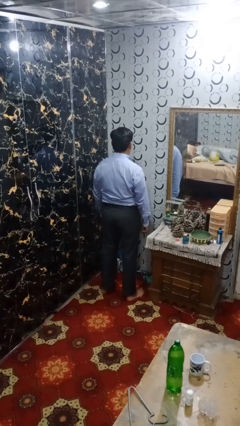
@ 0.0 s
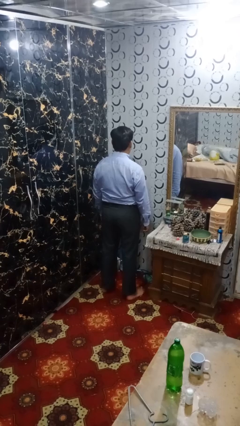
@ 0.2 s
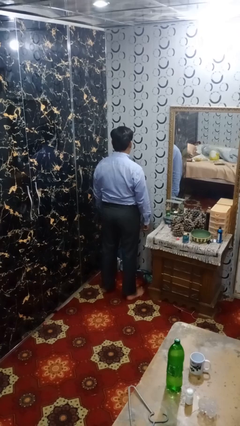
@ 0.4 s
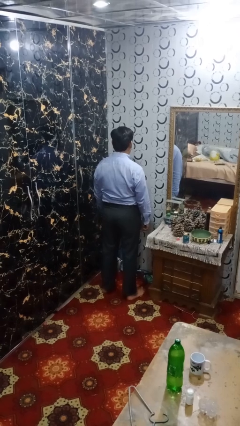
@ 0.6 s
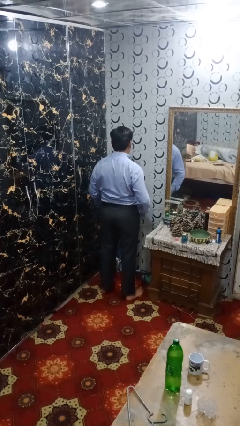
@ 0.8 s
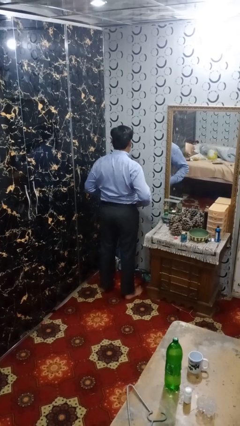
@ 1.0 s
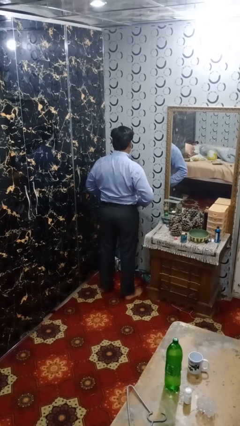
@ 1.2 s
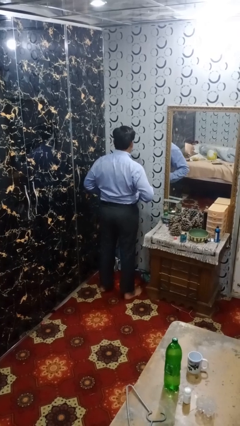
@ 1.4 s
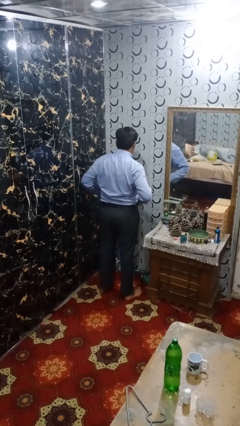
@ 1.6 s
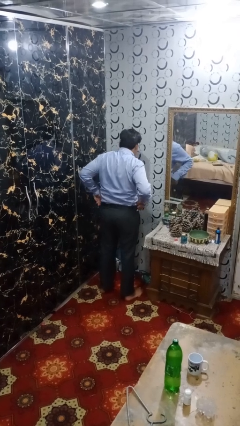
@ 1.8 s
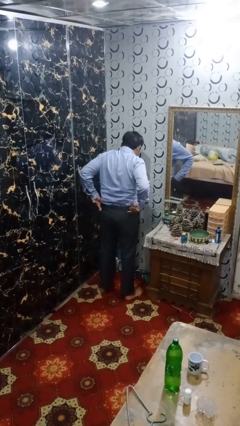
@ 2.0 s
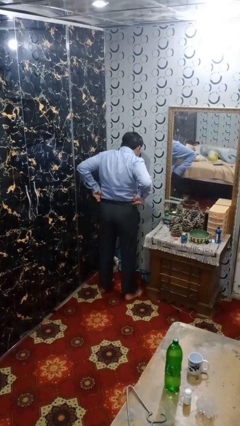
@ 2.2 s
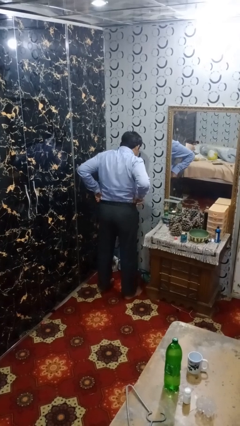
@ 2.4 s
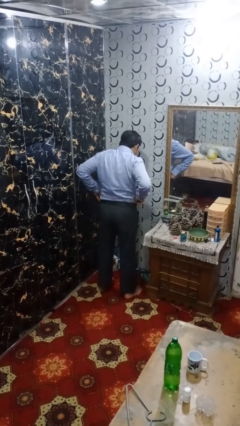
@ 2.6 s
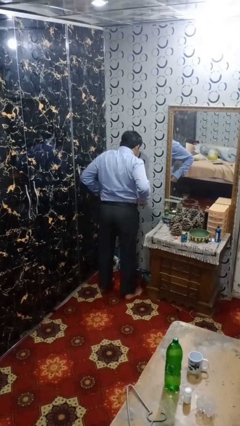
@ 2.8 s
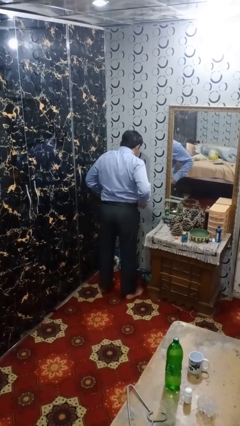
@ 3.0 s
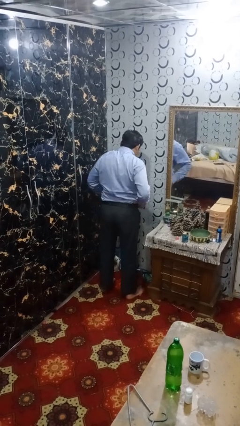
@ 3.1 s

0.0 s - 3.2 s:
person hikes up pants

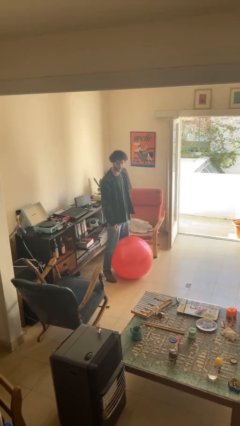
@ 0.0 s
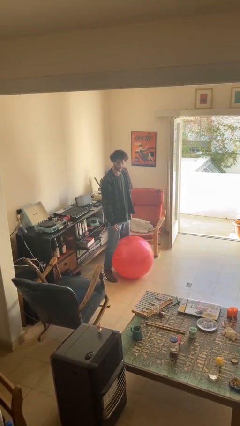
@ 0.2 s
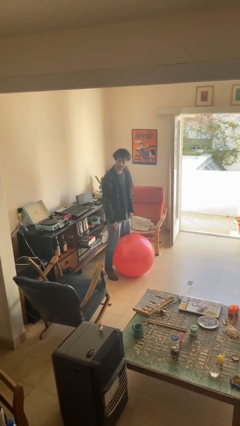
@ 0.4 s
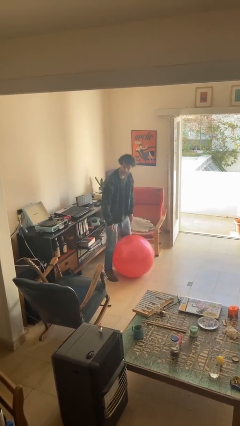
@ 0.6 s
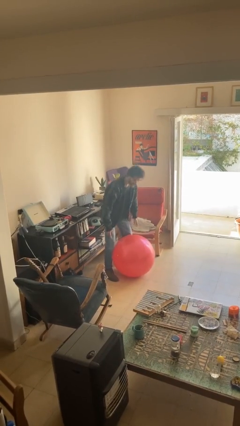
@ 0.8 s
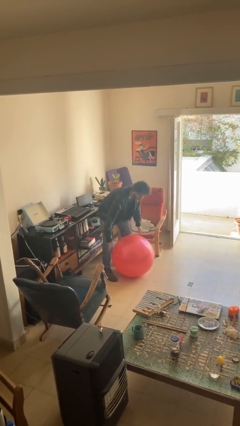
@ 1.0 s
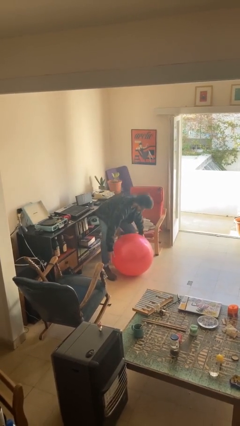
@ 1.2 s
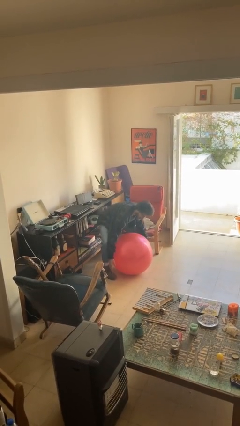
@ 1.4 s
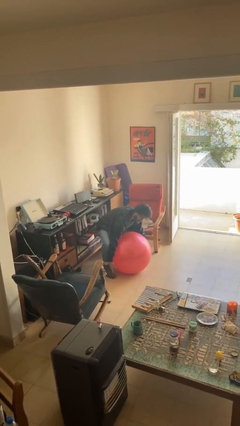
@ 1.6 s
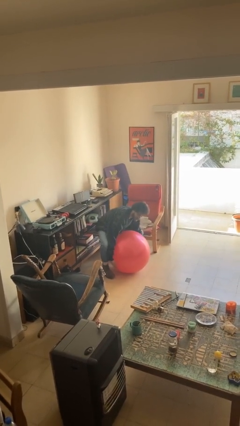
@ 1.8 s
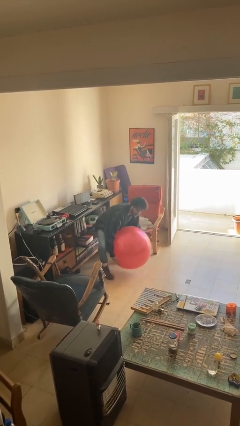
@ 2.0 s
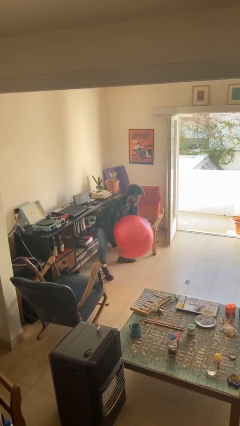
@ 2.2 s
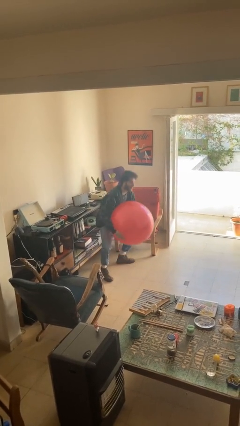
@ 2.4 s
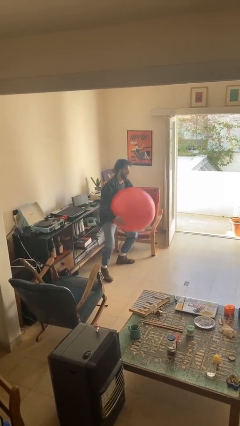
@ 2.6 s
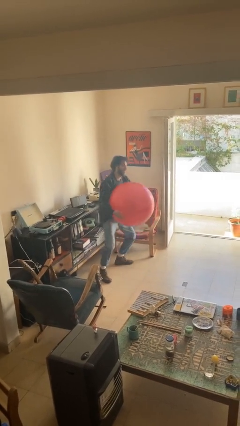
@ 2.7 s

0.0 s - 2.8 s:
person picks up object from floor

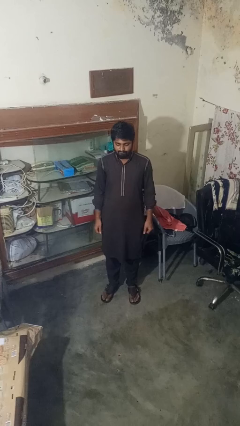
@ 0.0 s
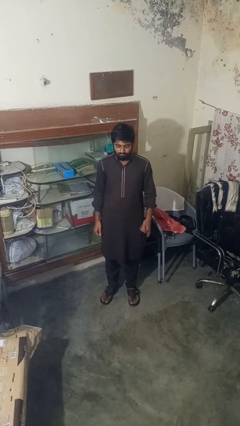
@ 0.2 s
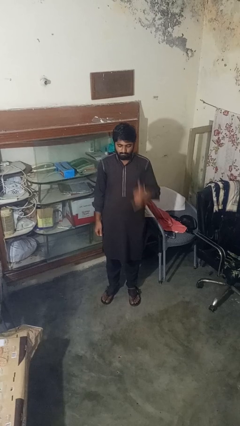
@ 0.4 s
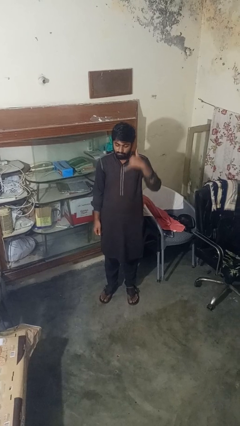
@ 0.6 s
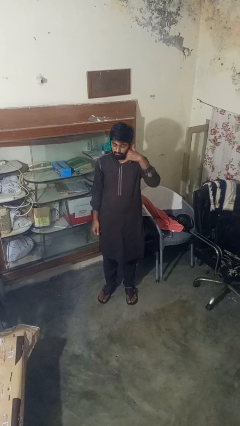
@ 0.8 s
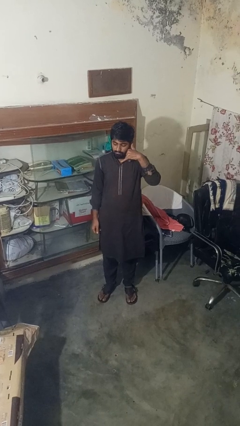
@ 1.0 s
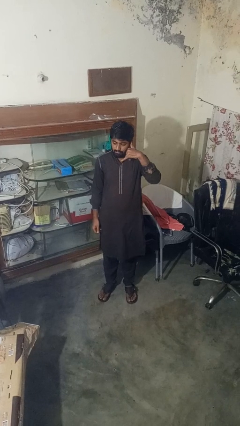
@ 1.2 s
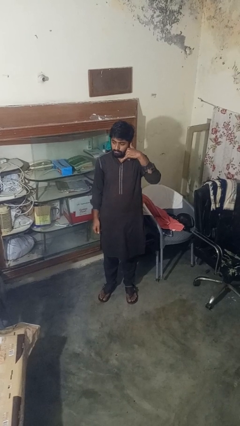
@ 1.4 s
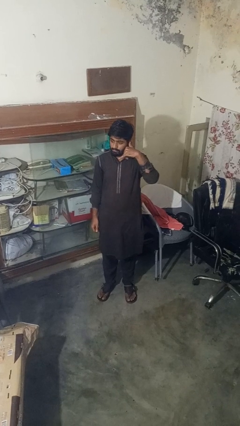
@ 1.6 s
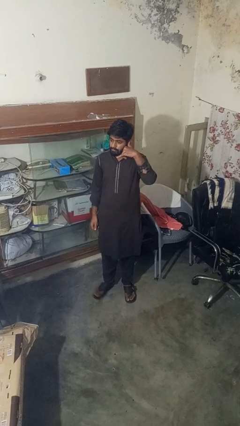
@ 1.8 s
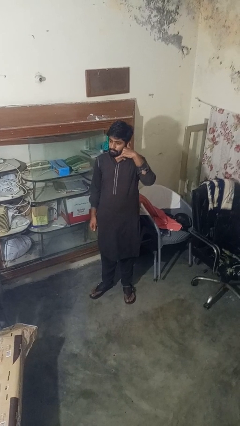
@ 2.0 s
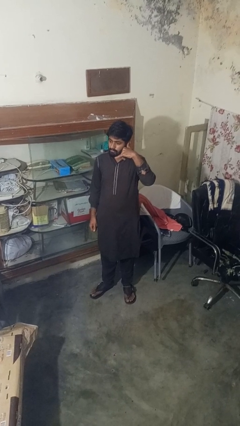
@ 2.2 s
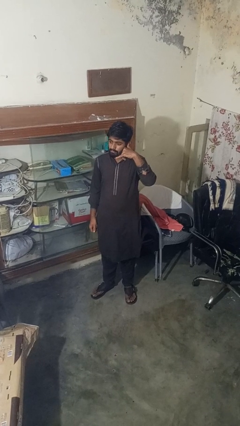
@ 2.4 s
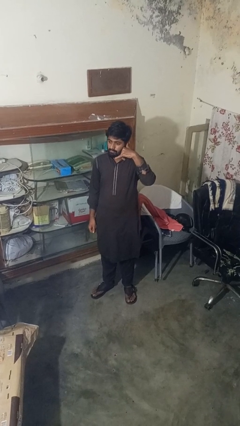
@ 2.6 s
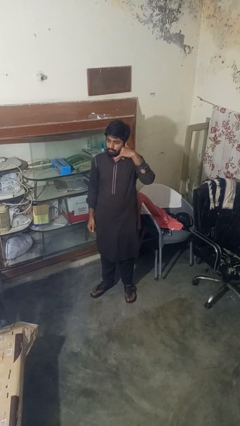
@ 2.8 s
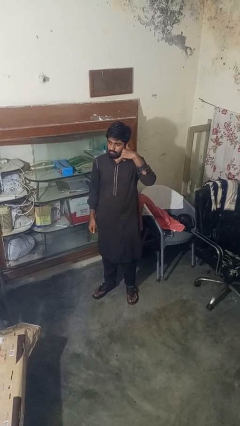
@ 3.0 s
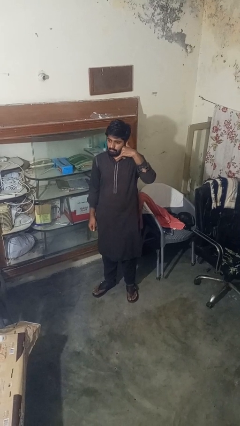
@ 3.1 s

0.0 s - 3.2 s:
person gestures call me

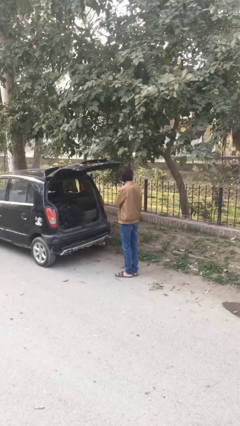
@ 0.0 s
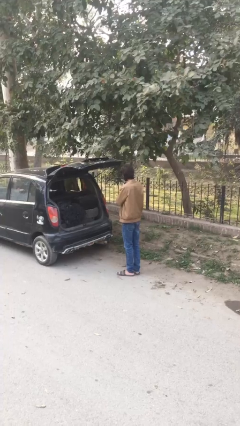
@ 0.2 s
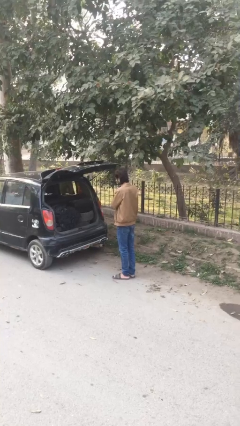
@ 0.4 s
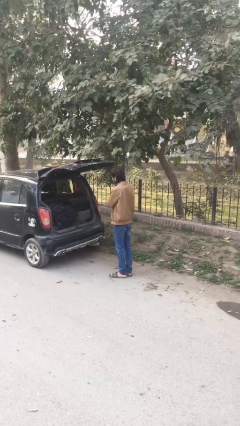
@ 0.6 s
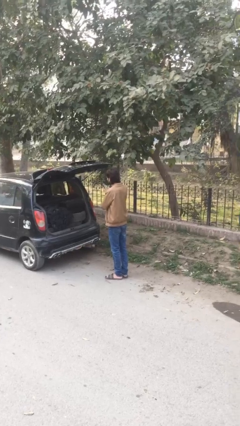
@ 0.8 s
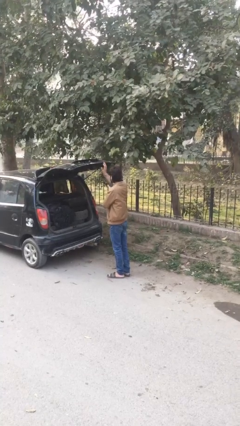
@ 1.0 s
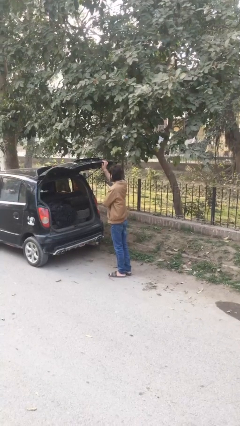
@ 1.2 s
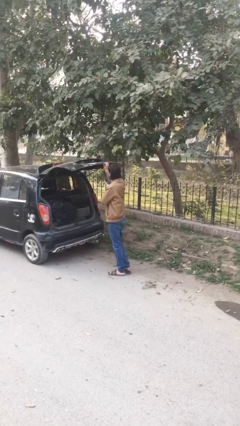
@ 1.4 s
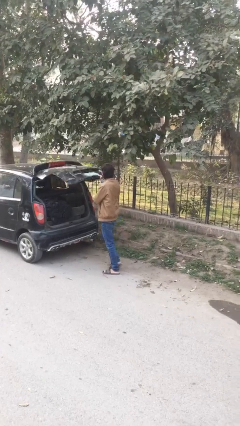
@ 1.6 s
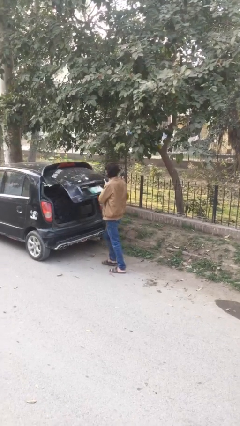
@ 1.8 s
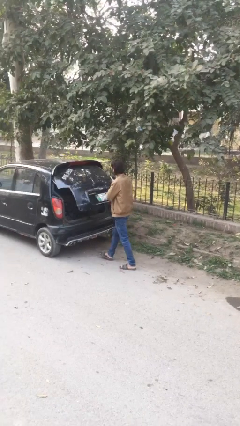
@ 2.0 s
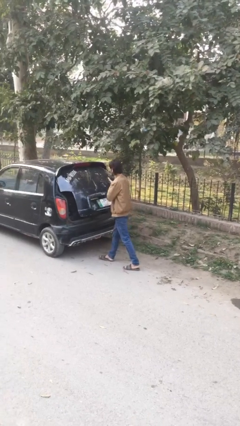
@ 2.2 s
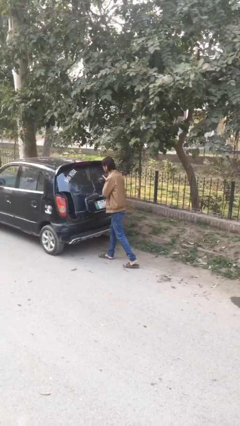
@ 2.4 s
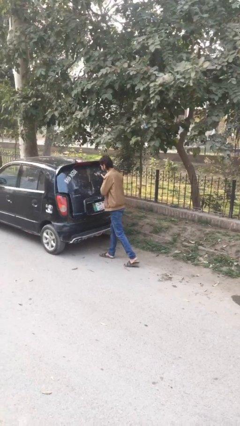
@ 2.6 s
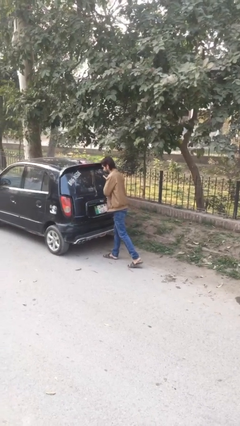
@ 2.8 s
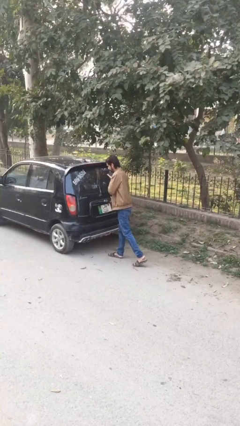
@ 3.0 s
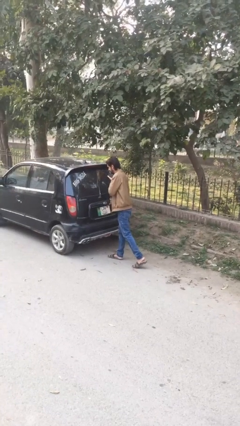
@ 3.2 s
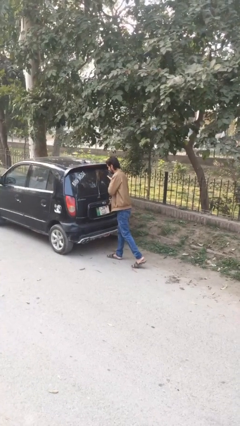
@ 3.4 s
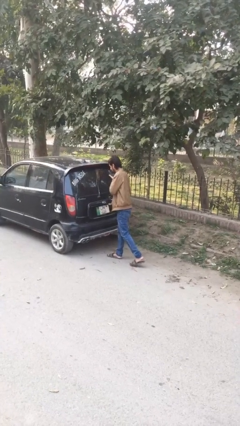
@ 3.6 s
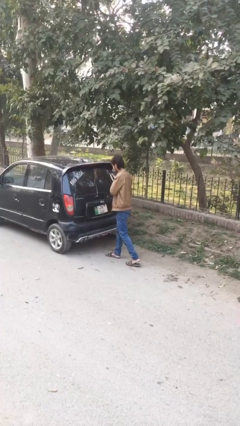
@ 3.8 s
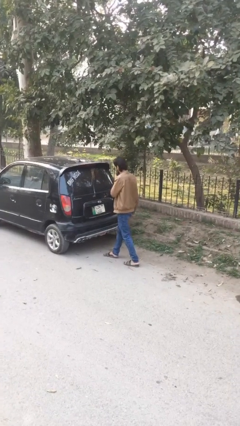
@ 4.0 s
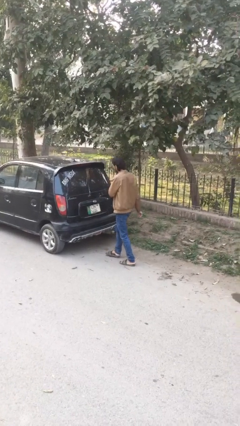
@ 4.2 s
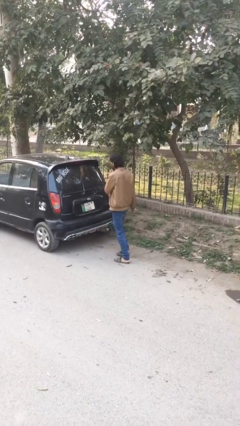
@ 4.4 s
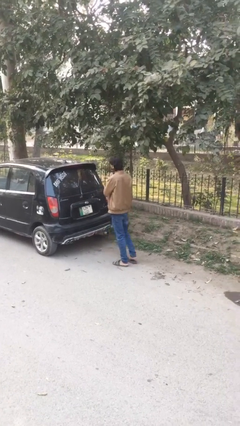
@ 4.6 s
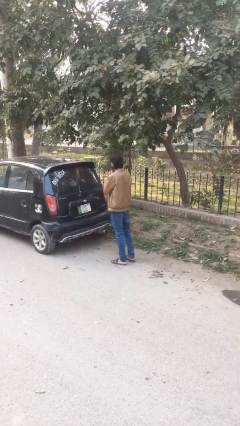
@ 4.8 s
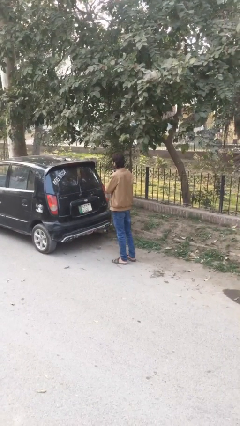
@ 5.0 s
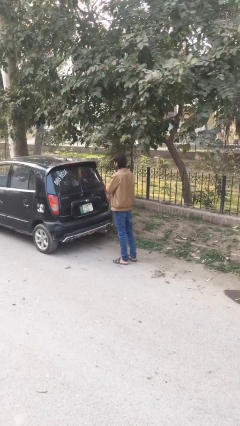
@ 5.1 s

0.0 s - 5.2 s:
person closes car trunk

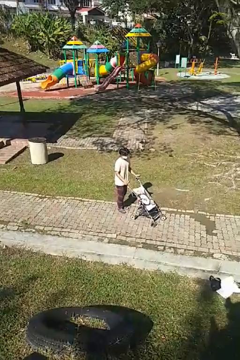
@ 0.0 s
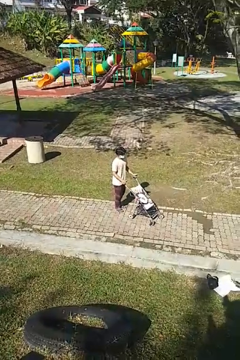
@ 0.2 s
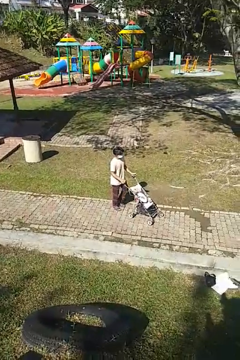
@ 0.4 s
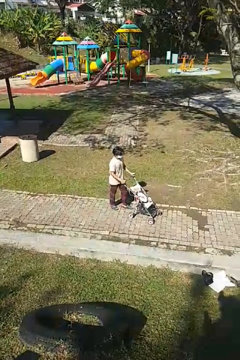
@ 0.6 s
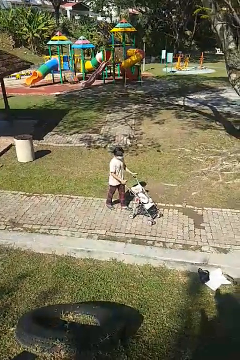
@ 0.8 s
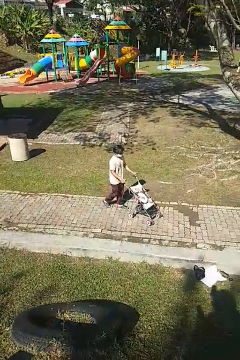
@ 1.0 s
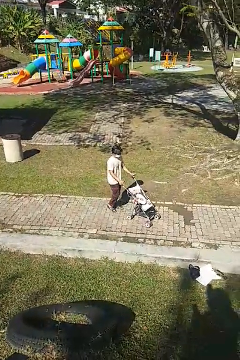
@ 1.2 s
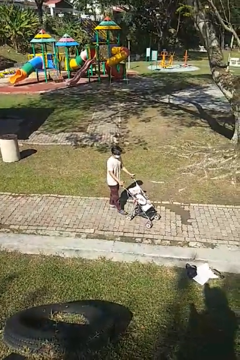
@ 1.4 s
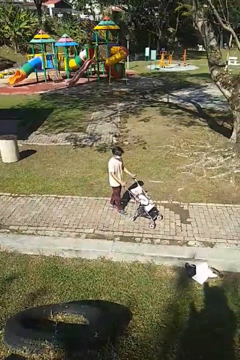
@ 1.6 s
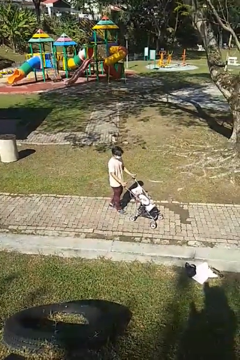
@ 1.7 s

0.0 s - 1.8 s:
person pushes wheeled cart

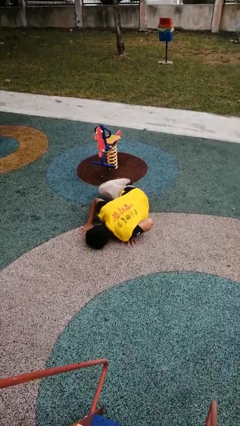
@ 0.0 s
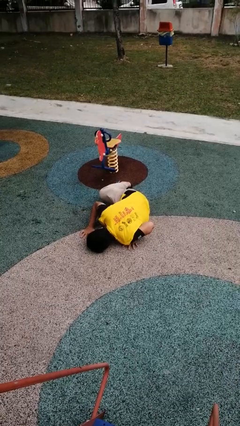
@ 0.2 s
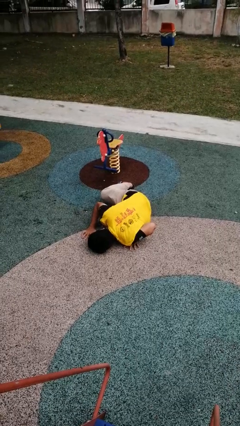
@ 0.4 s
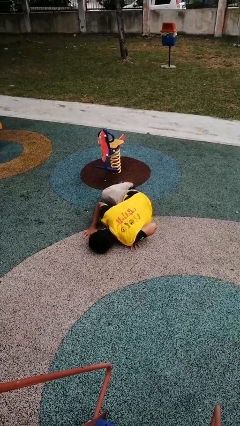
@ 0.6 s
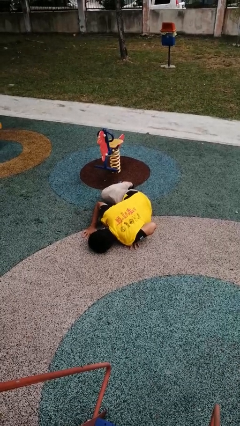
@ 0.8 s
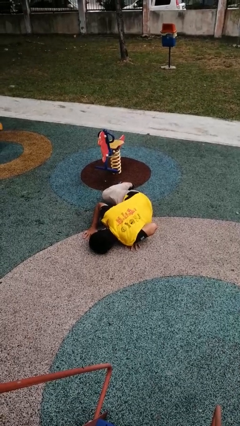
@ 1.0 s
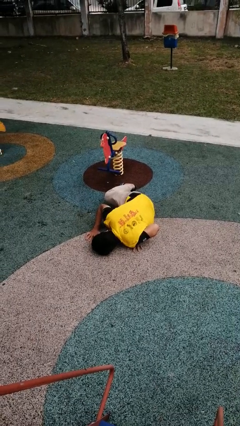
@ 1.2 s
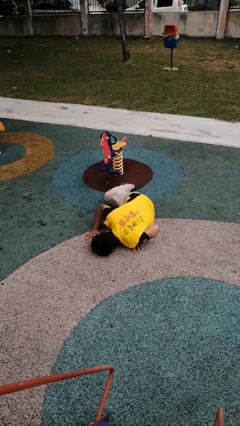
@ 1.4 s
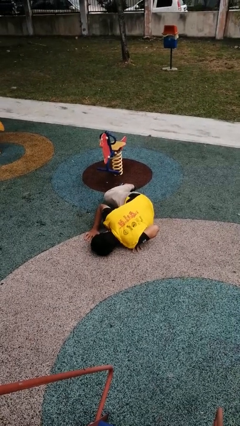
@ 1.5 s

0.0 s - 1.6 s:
person lies down on floor
